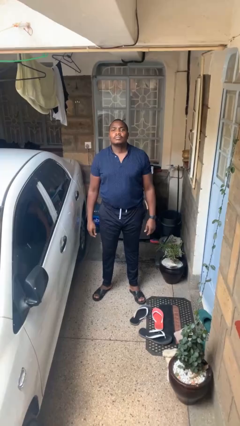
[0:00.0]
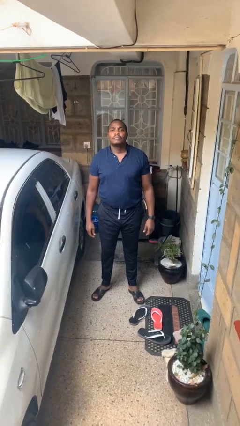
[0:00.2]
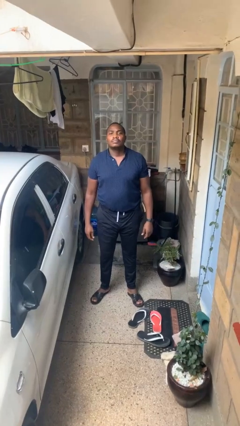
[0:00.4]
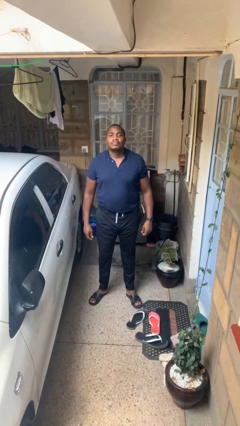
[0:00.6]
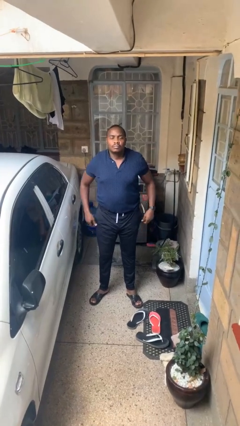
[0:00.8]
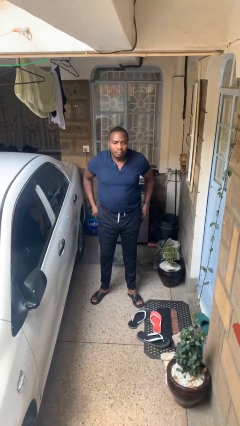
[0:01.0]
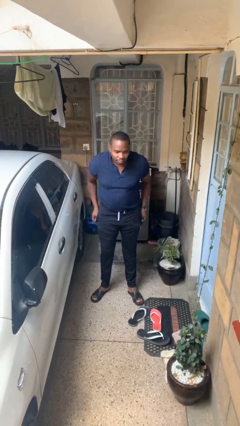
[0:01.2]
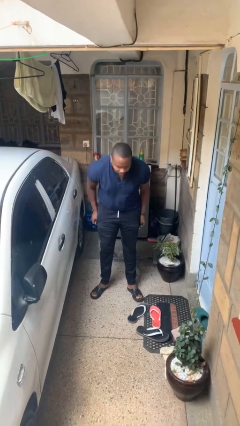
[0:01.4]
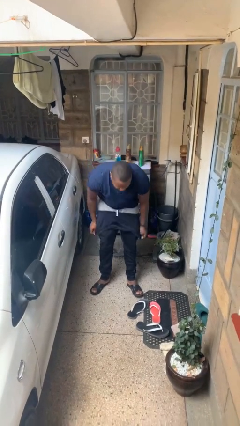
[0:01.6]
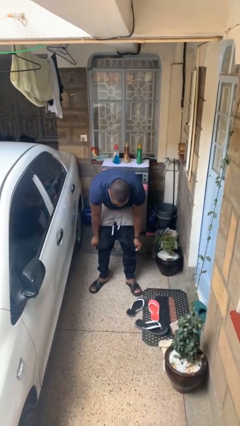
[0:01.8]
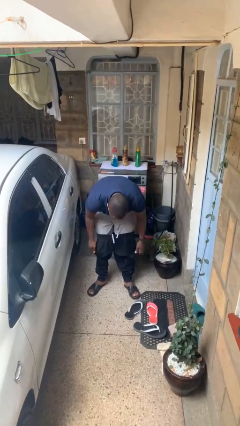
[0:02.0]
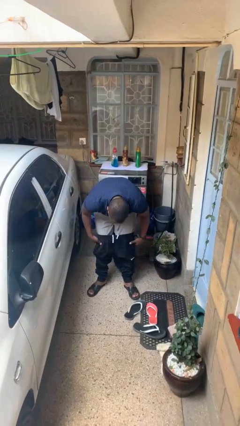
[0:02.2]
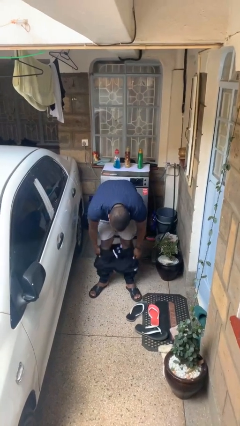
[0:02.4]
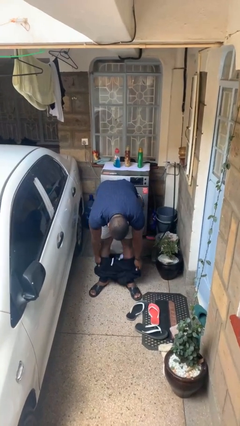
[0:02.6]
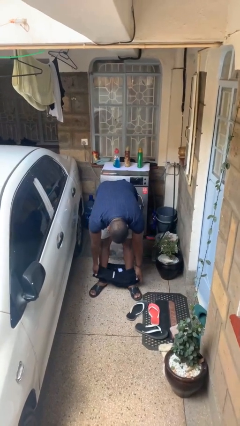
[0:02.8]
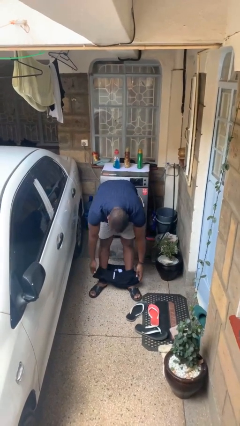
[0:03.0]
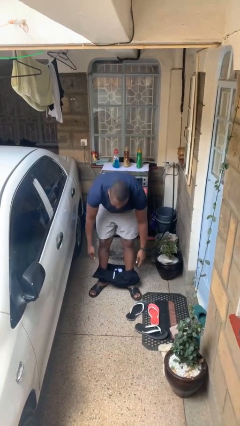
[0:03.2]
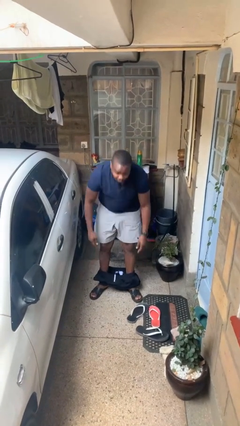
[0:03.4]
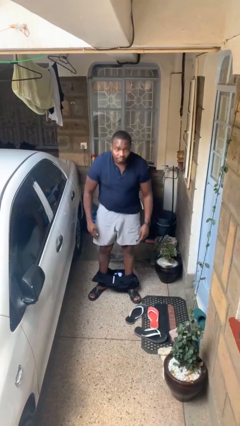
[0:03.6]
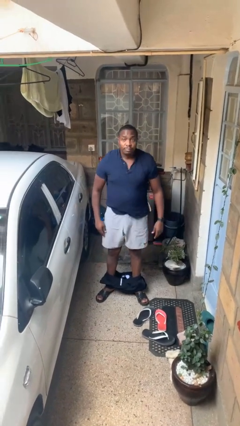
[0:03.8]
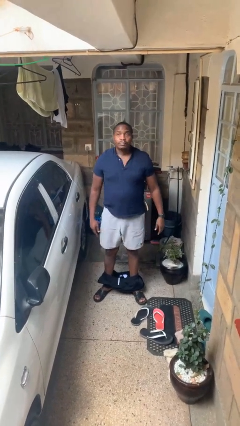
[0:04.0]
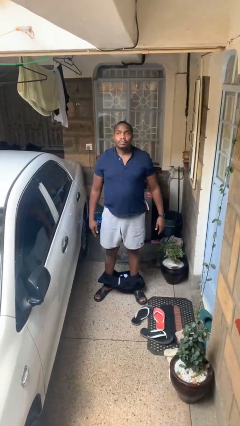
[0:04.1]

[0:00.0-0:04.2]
person takes off pants

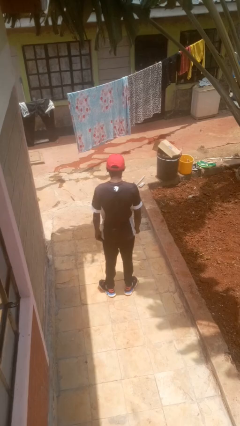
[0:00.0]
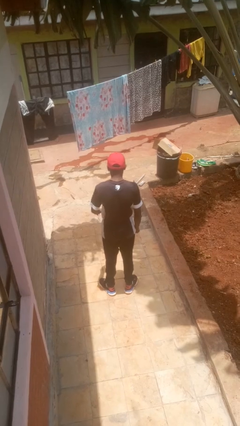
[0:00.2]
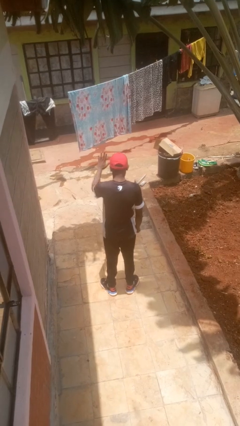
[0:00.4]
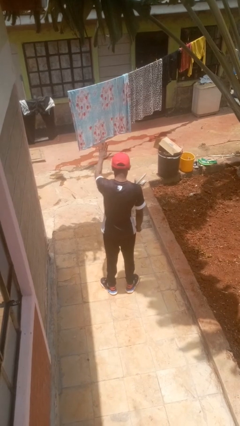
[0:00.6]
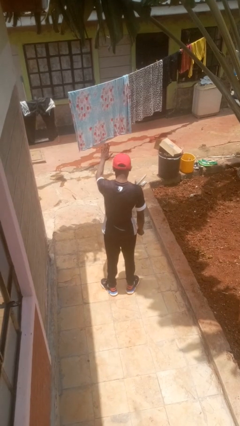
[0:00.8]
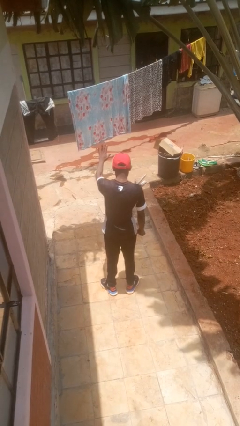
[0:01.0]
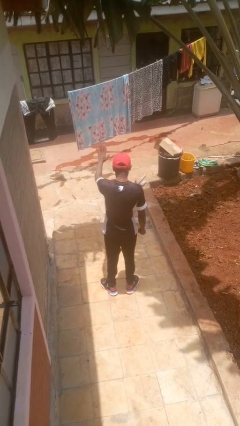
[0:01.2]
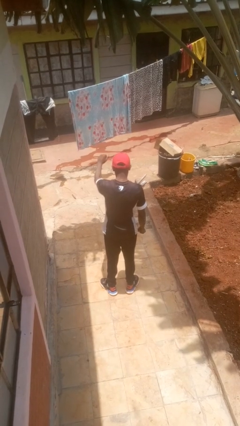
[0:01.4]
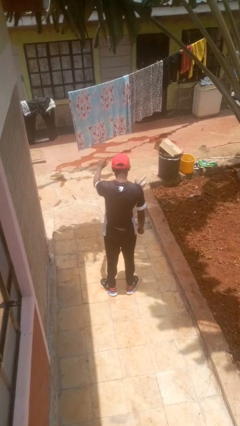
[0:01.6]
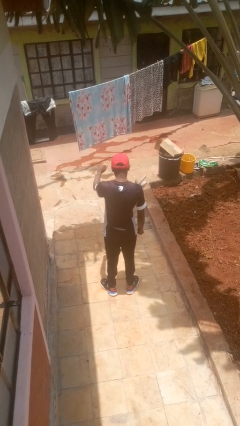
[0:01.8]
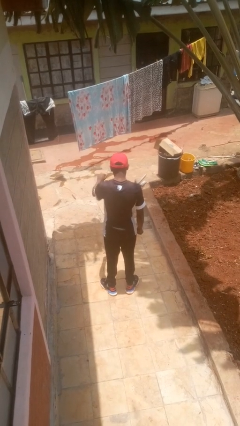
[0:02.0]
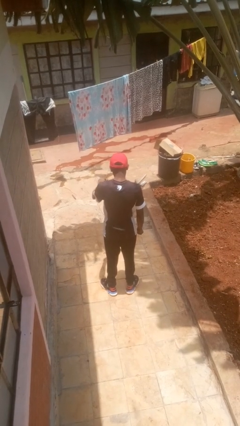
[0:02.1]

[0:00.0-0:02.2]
person gestures stop

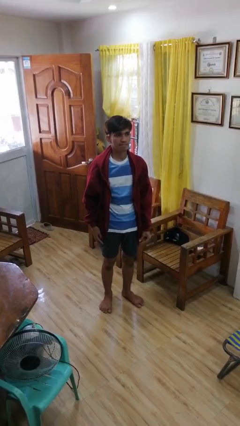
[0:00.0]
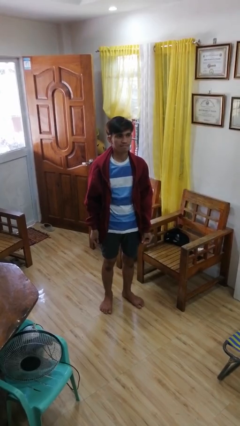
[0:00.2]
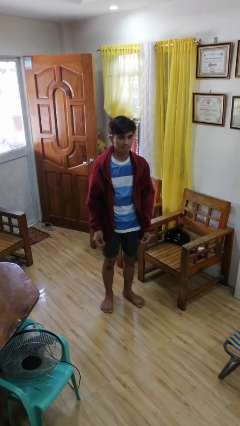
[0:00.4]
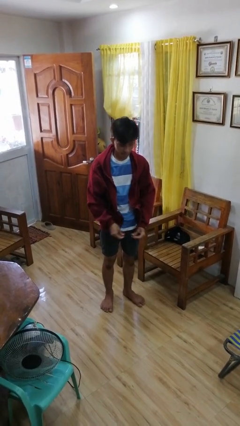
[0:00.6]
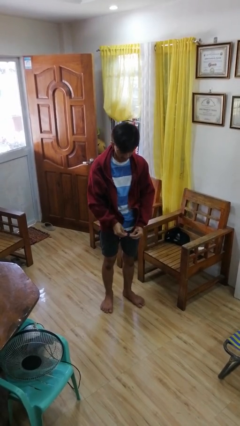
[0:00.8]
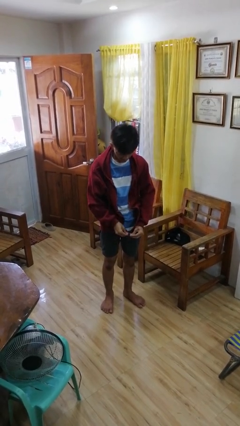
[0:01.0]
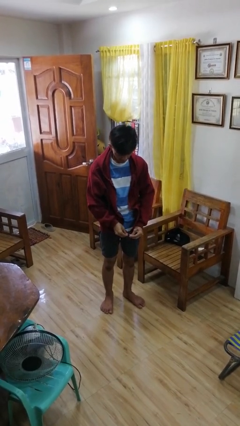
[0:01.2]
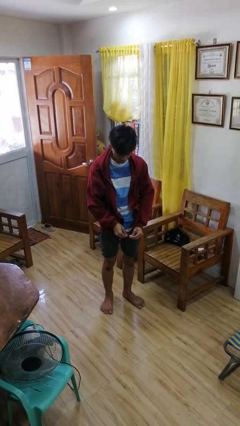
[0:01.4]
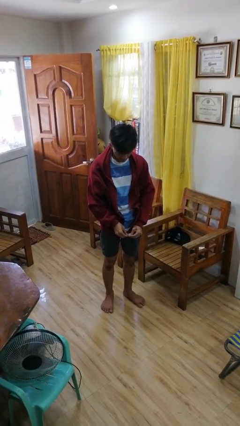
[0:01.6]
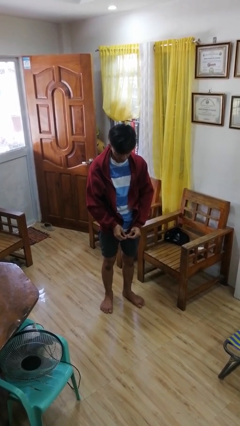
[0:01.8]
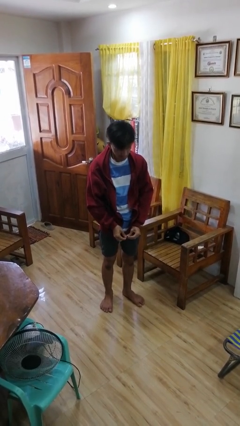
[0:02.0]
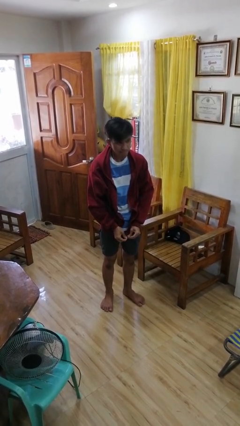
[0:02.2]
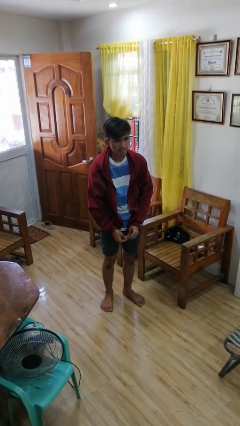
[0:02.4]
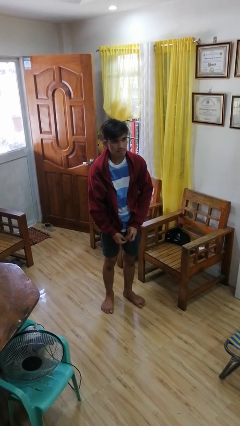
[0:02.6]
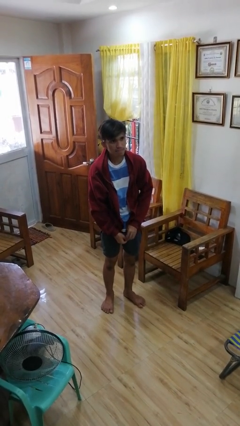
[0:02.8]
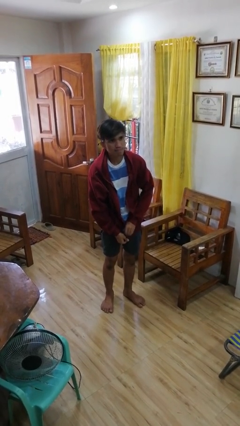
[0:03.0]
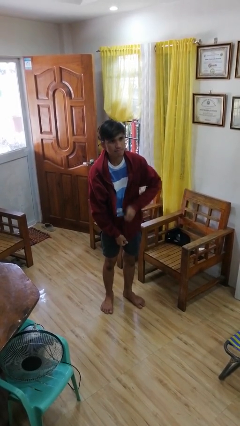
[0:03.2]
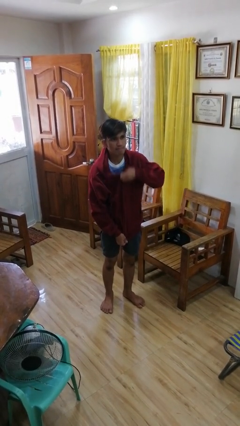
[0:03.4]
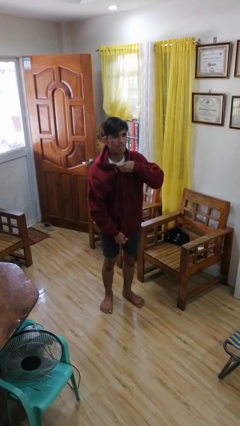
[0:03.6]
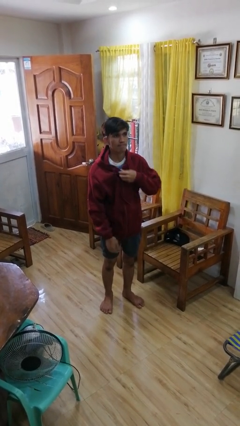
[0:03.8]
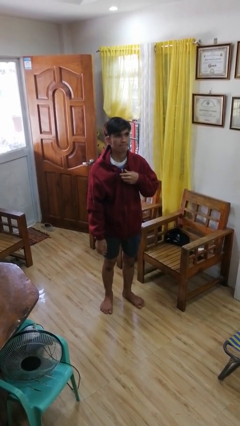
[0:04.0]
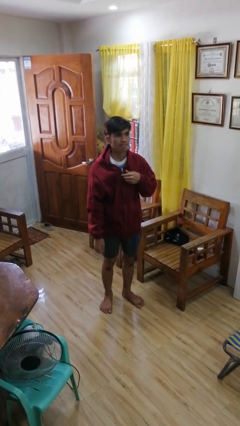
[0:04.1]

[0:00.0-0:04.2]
person zips up jacket

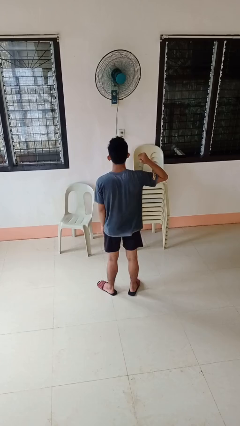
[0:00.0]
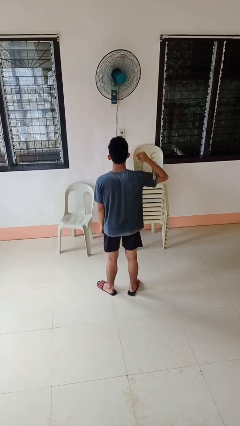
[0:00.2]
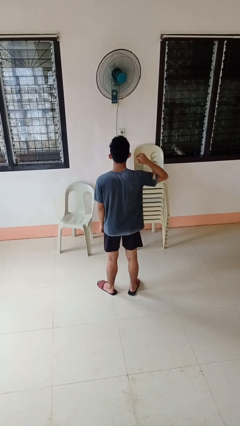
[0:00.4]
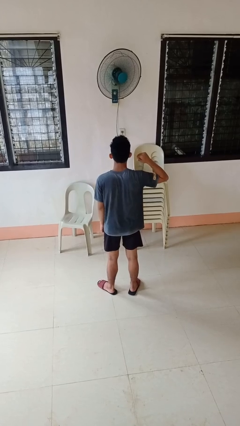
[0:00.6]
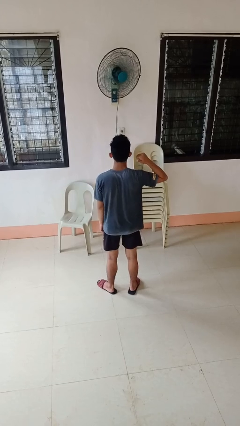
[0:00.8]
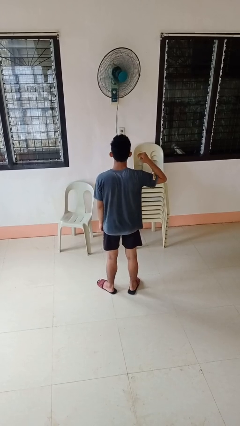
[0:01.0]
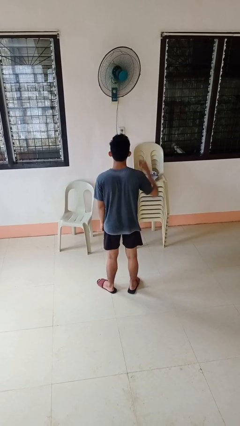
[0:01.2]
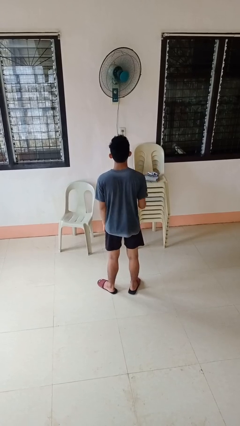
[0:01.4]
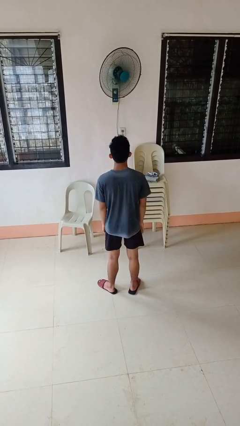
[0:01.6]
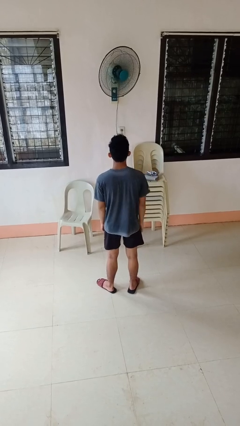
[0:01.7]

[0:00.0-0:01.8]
person gestures behind me

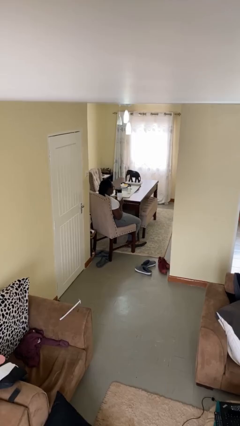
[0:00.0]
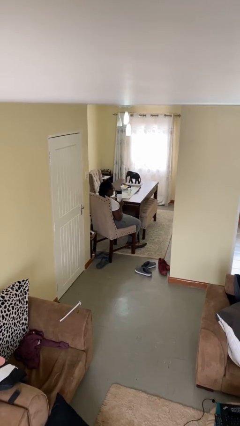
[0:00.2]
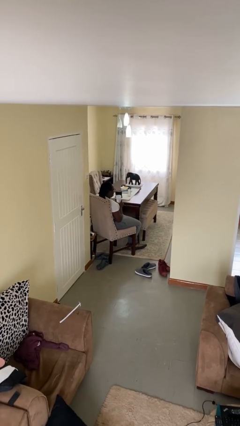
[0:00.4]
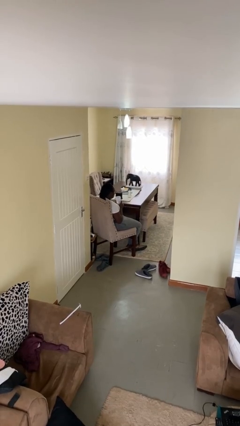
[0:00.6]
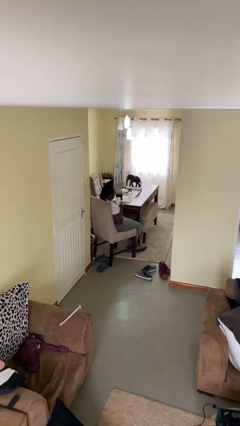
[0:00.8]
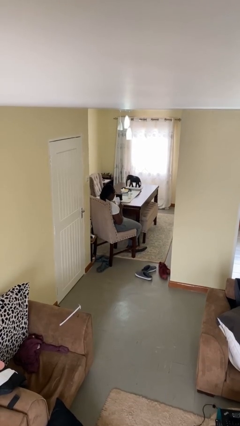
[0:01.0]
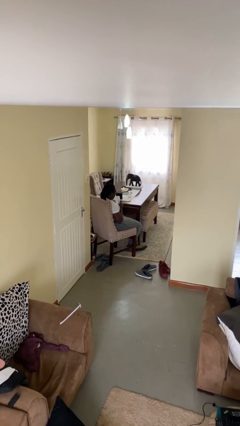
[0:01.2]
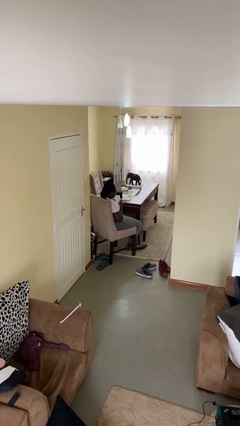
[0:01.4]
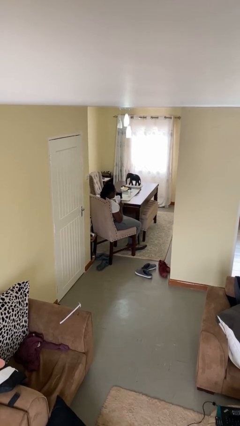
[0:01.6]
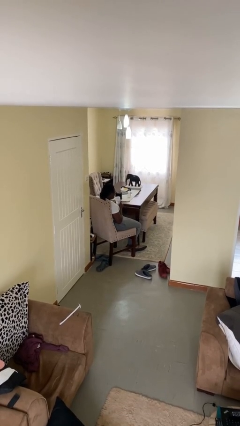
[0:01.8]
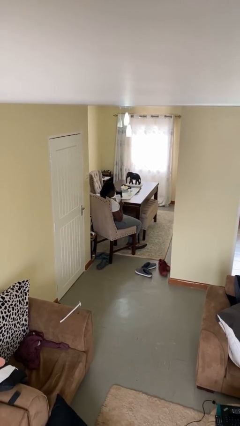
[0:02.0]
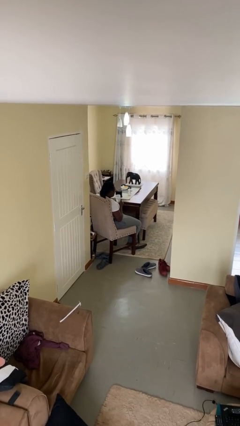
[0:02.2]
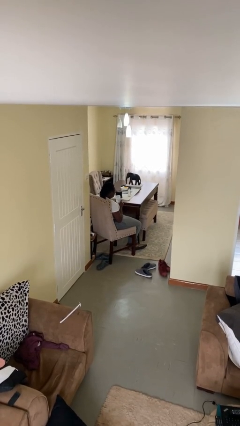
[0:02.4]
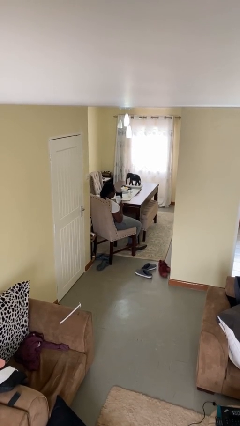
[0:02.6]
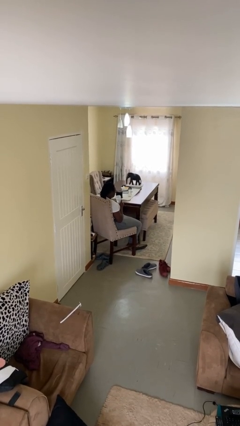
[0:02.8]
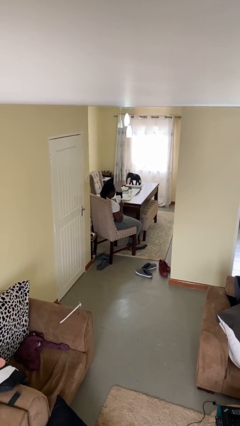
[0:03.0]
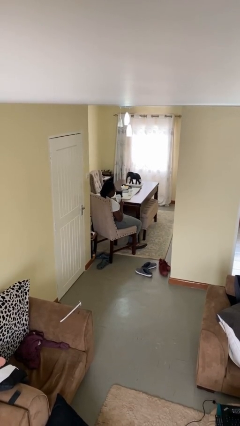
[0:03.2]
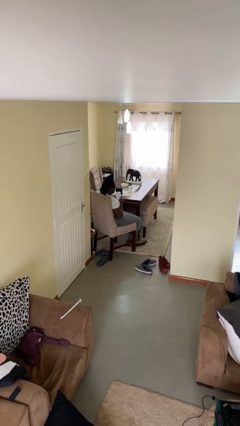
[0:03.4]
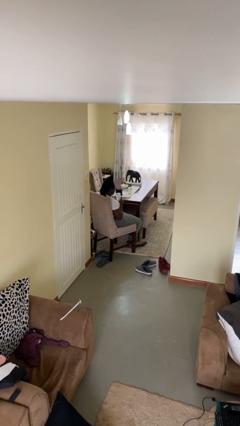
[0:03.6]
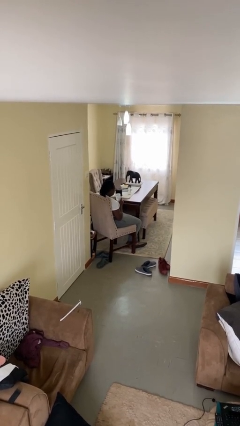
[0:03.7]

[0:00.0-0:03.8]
person drinks from straw

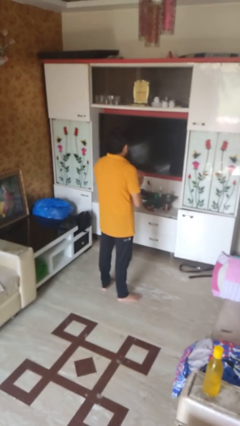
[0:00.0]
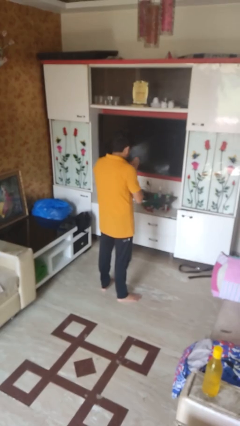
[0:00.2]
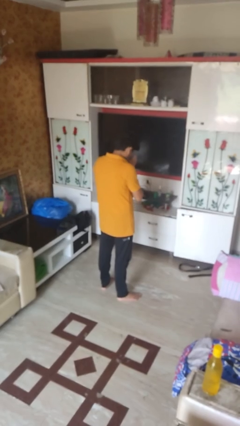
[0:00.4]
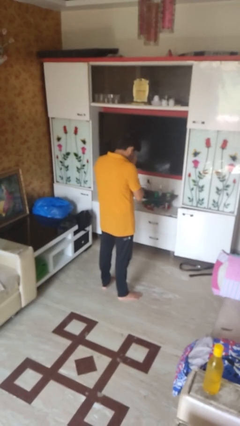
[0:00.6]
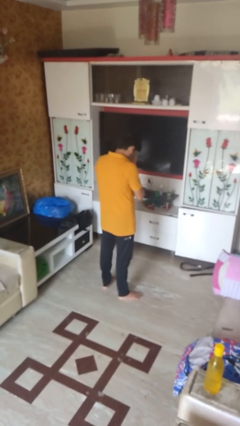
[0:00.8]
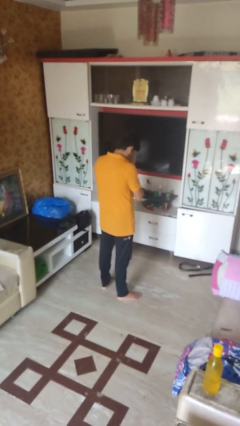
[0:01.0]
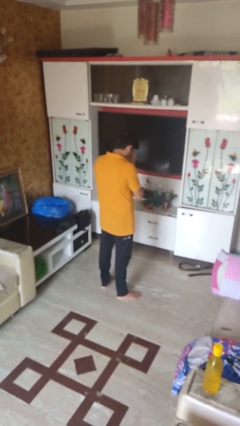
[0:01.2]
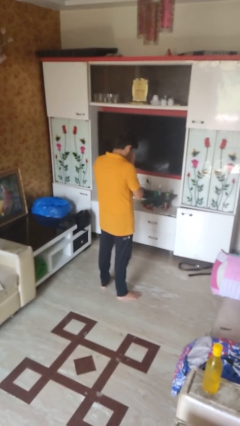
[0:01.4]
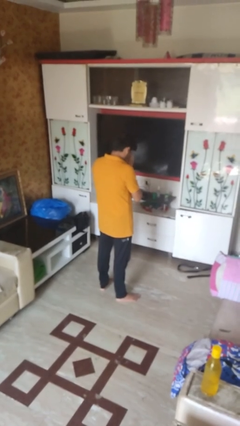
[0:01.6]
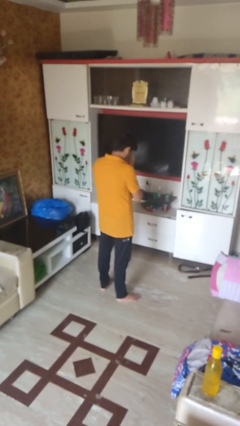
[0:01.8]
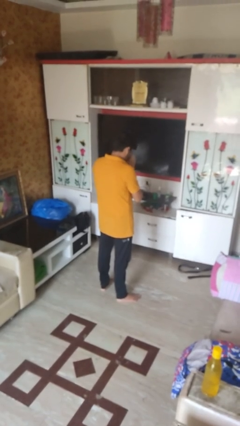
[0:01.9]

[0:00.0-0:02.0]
person prays
